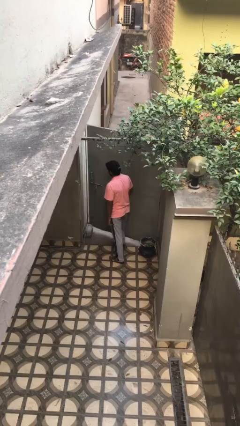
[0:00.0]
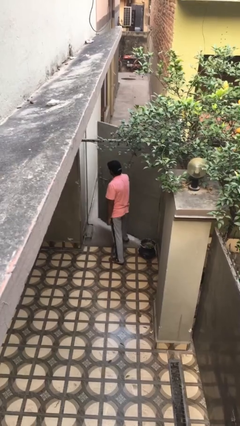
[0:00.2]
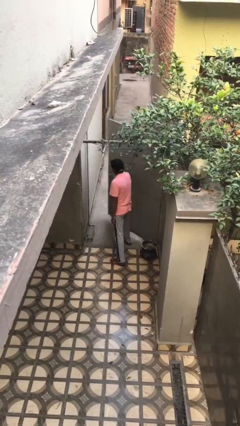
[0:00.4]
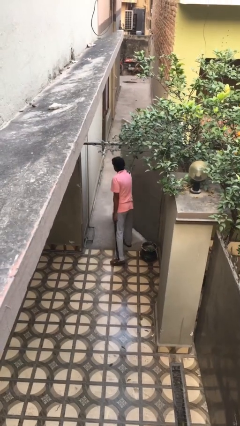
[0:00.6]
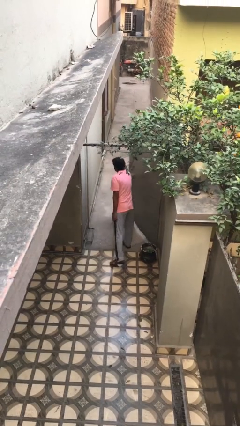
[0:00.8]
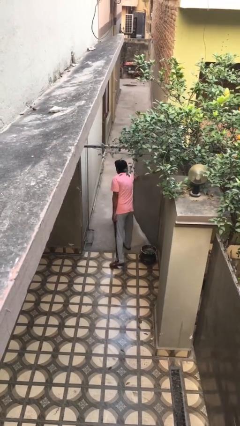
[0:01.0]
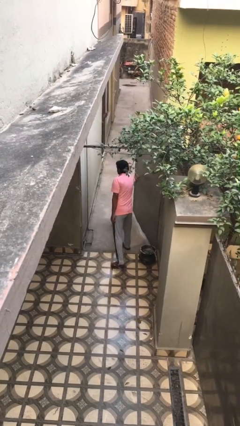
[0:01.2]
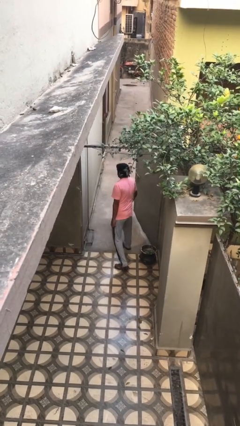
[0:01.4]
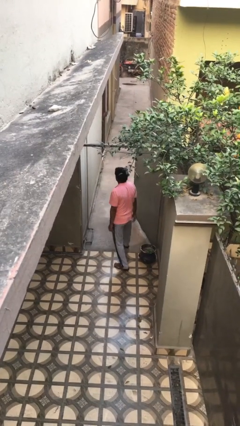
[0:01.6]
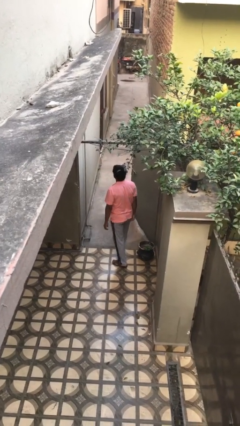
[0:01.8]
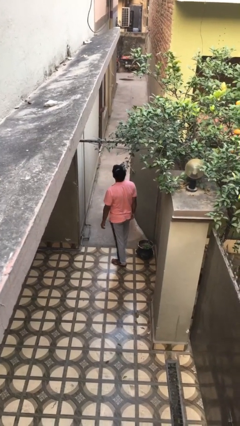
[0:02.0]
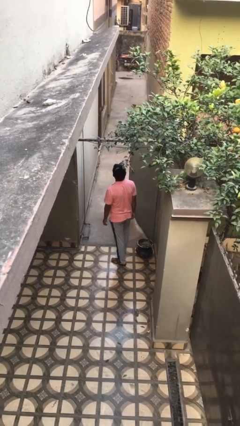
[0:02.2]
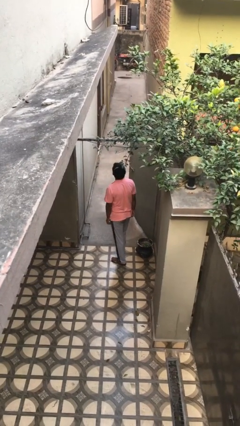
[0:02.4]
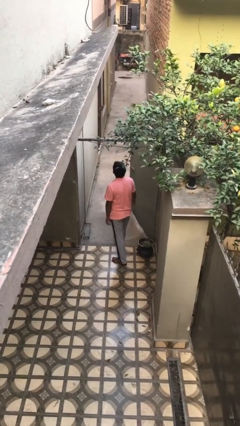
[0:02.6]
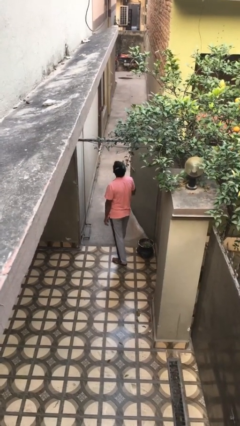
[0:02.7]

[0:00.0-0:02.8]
person opens facility door

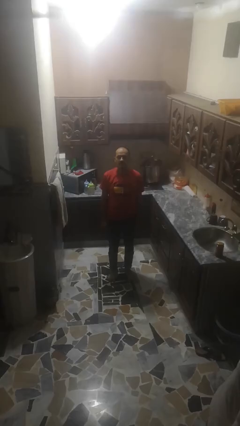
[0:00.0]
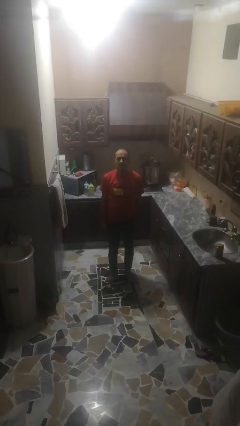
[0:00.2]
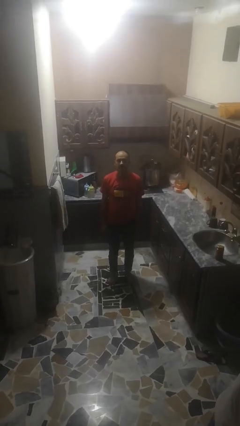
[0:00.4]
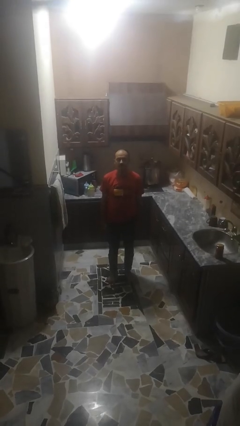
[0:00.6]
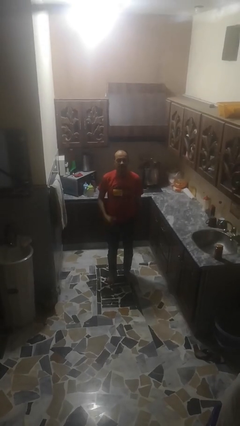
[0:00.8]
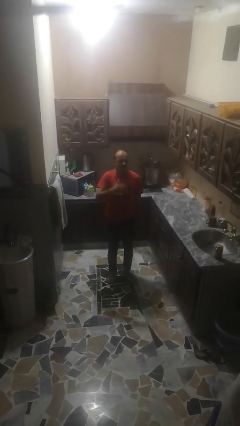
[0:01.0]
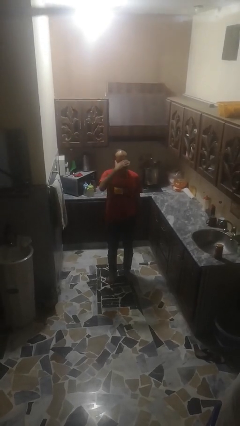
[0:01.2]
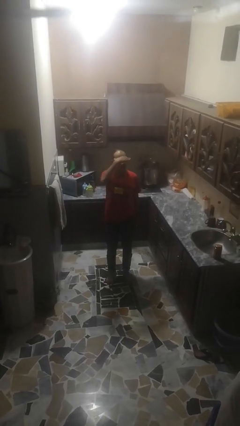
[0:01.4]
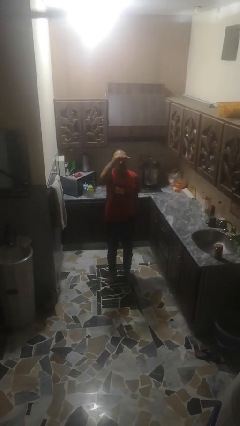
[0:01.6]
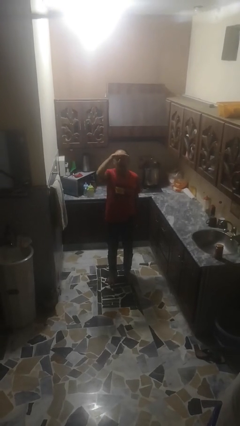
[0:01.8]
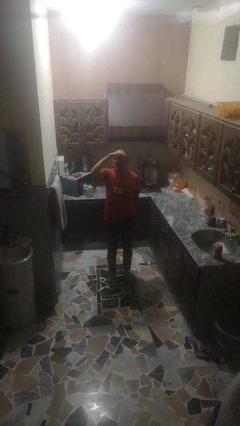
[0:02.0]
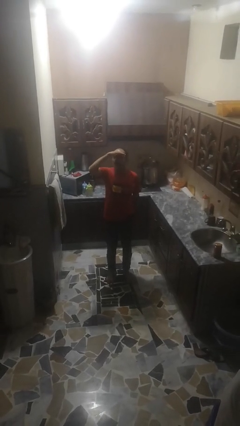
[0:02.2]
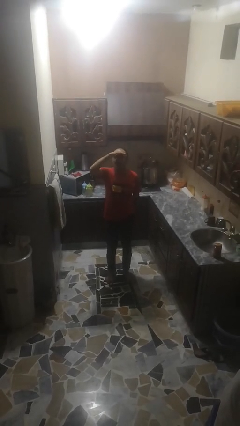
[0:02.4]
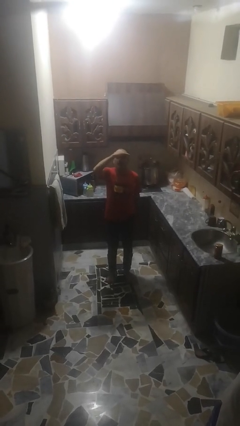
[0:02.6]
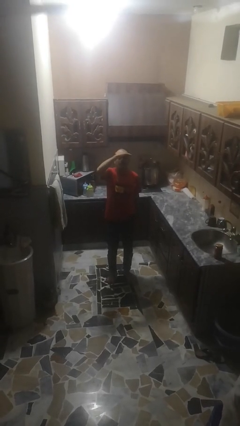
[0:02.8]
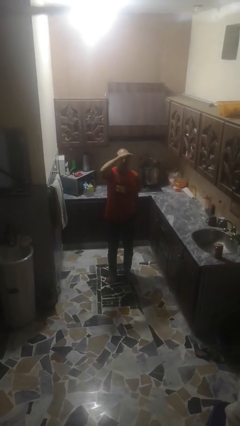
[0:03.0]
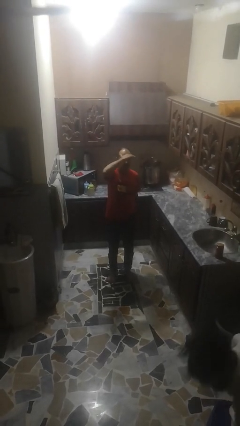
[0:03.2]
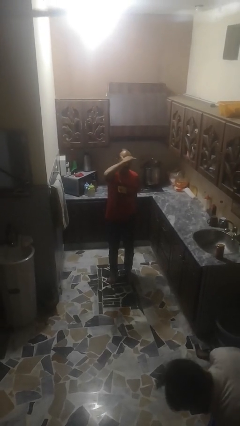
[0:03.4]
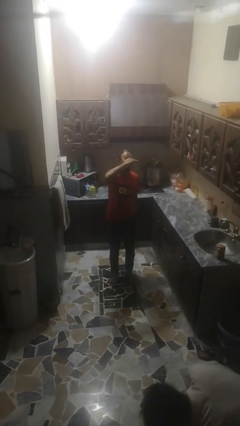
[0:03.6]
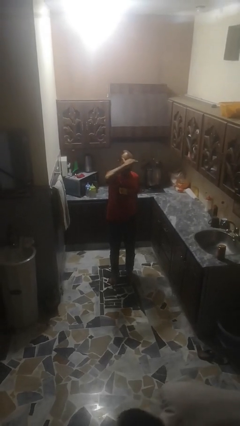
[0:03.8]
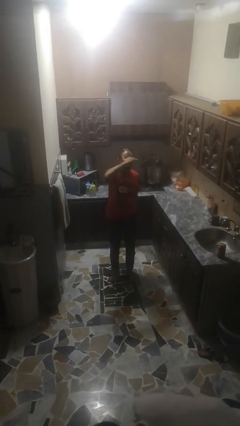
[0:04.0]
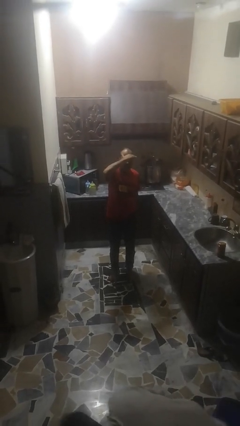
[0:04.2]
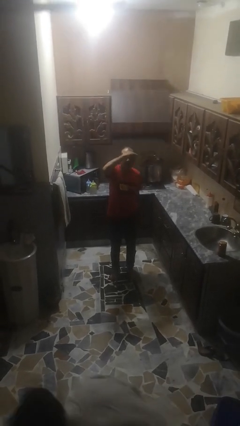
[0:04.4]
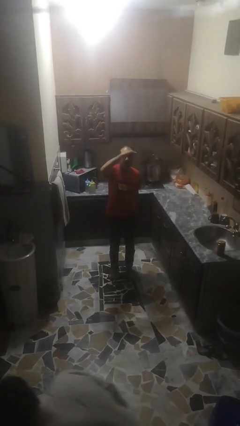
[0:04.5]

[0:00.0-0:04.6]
person shades eyes

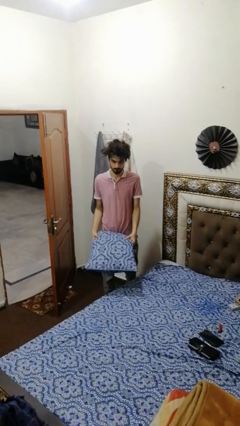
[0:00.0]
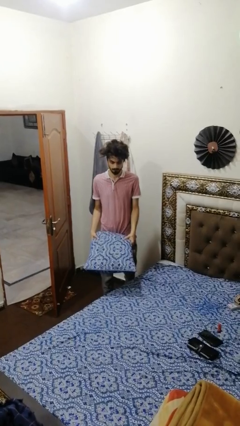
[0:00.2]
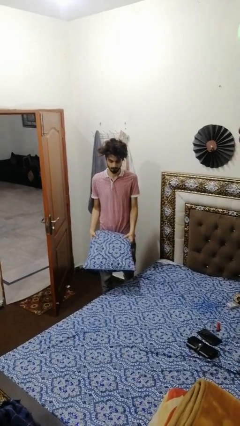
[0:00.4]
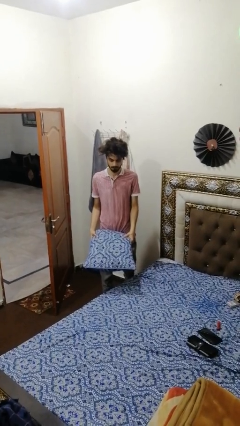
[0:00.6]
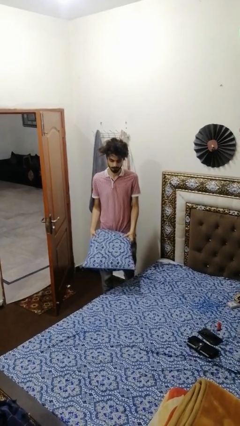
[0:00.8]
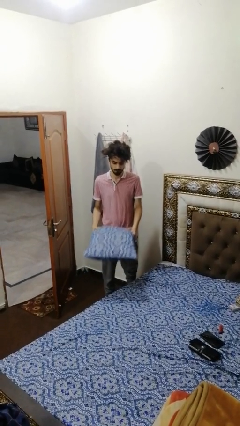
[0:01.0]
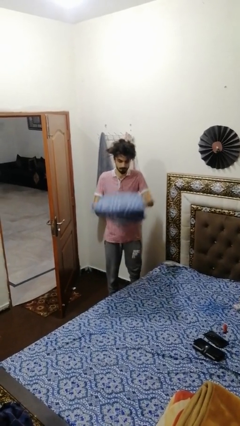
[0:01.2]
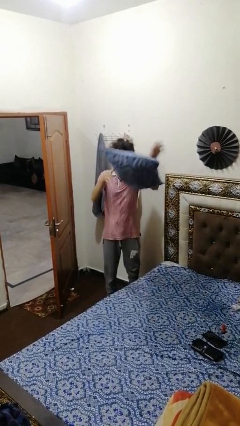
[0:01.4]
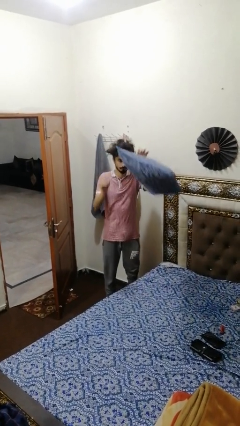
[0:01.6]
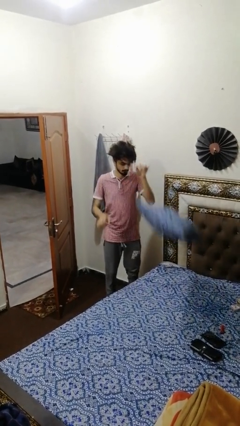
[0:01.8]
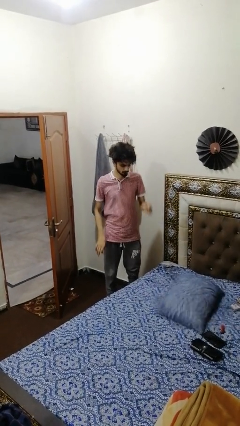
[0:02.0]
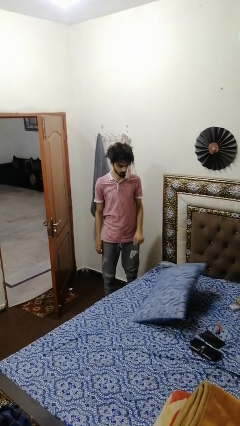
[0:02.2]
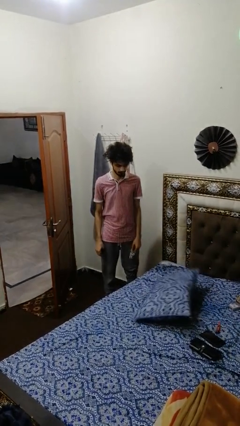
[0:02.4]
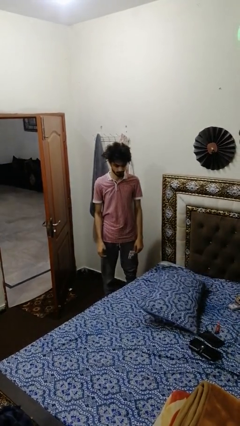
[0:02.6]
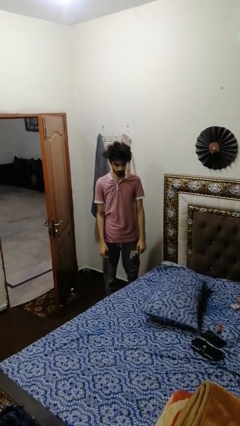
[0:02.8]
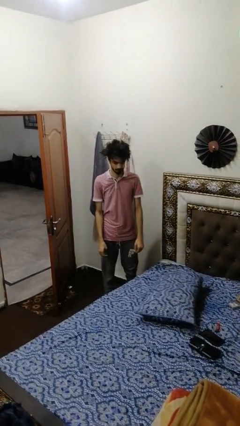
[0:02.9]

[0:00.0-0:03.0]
person throws object on bed

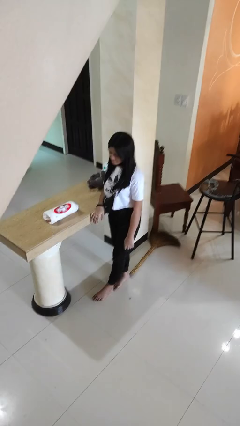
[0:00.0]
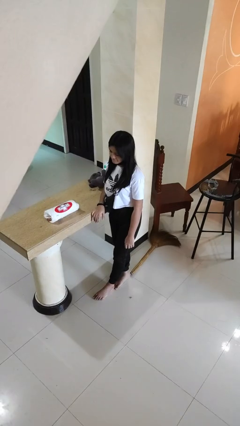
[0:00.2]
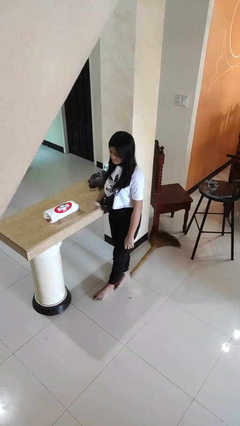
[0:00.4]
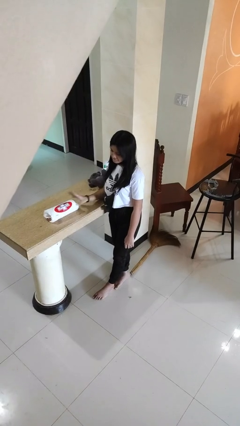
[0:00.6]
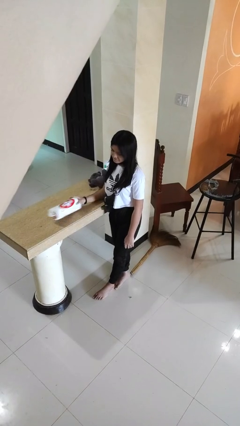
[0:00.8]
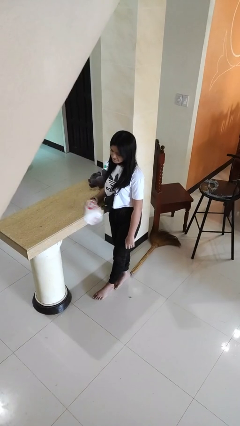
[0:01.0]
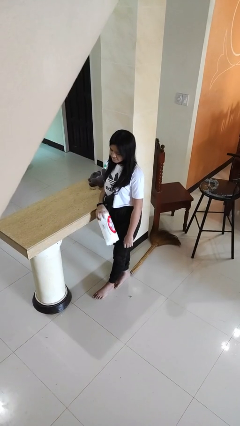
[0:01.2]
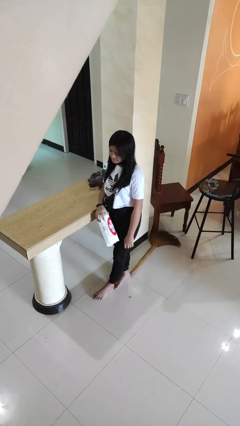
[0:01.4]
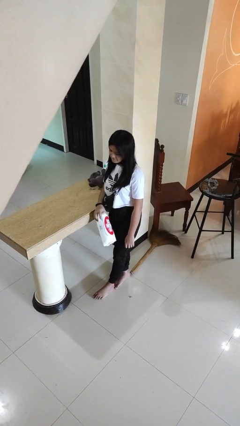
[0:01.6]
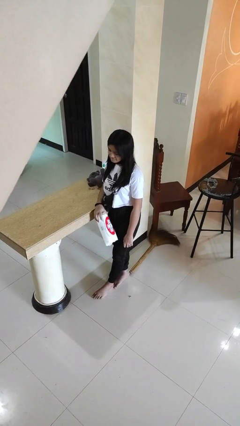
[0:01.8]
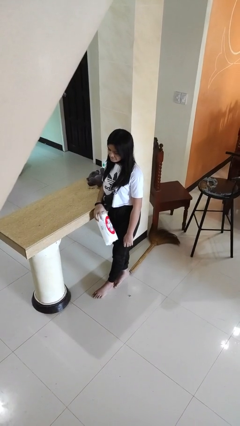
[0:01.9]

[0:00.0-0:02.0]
person picks up object from countertop

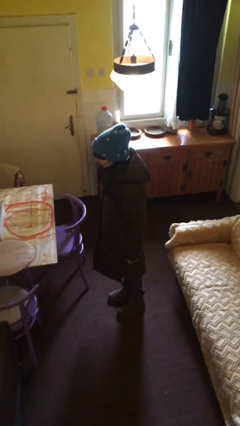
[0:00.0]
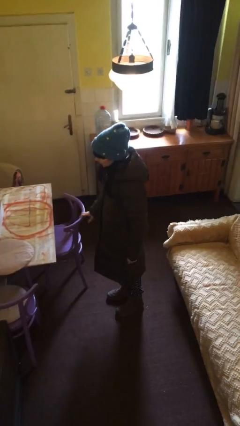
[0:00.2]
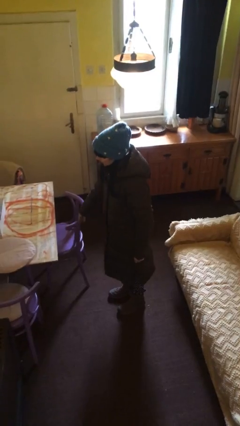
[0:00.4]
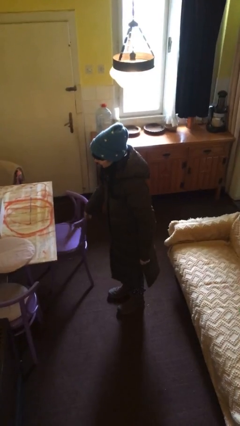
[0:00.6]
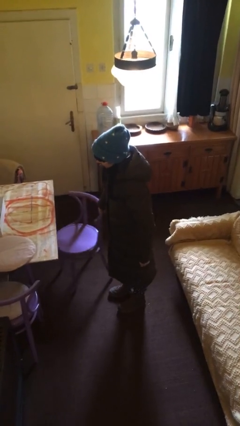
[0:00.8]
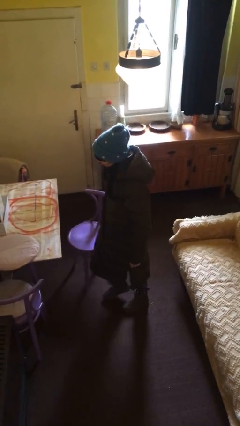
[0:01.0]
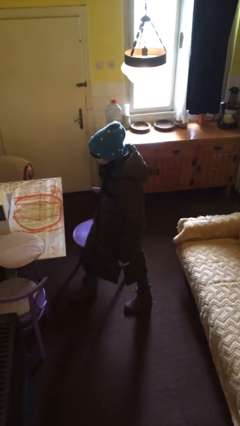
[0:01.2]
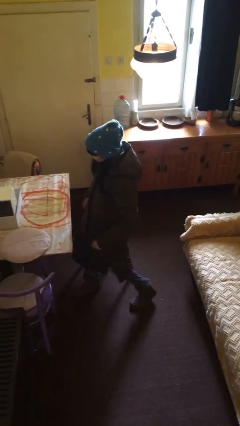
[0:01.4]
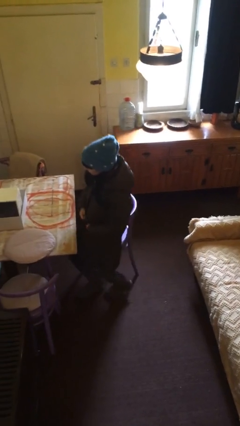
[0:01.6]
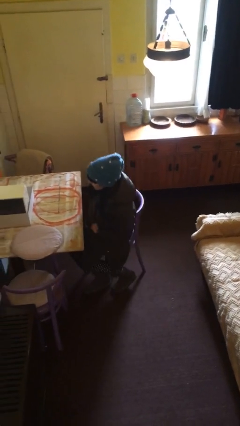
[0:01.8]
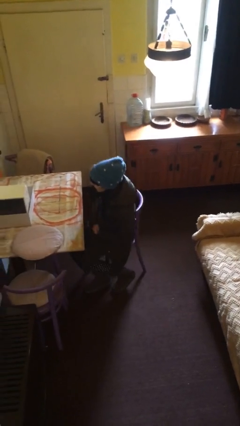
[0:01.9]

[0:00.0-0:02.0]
person sits down

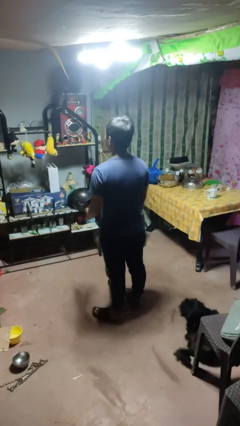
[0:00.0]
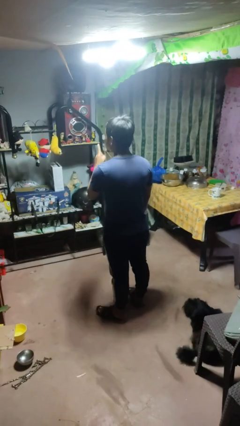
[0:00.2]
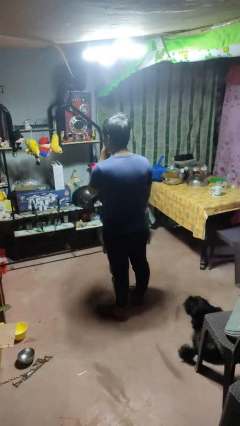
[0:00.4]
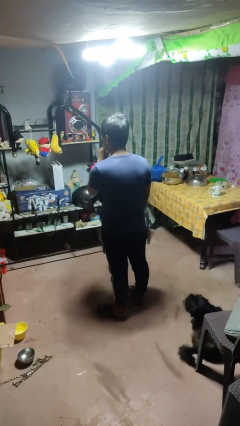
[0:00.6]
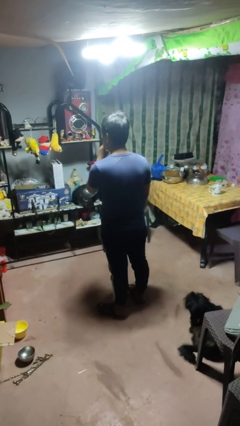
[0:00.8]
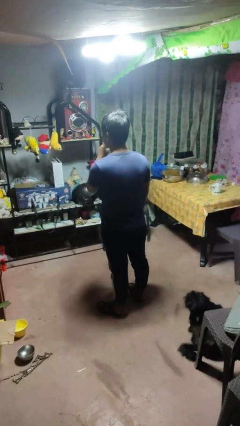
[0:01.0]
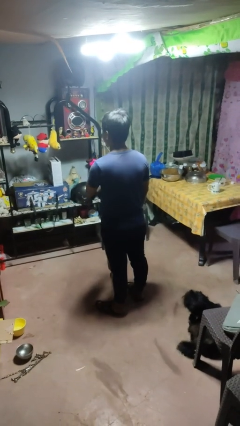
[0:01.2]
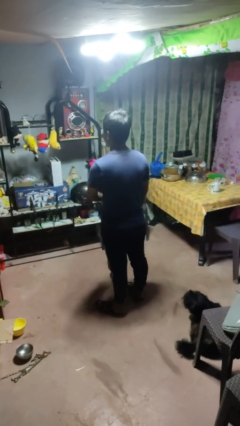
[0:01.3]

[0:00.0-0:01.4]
person gestures be quiet

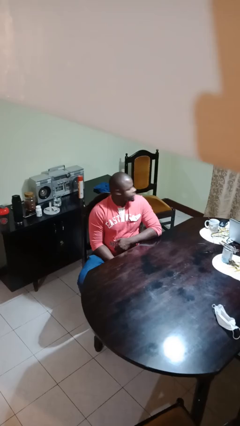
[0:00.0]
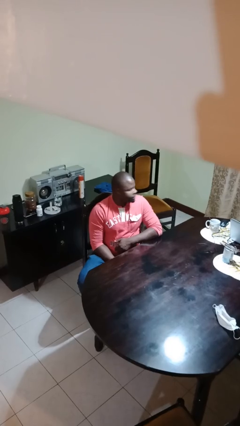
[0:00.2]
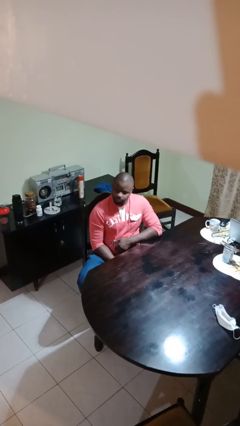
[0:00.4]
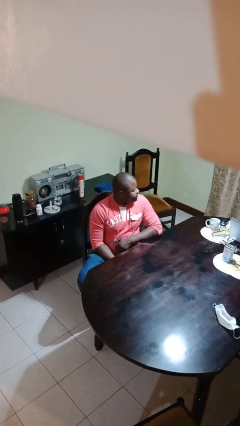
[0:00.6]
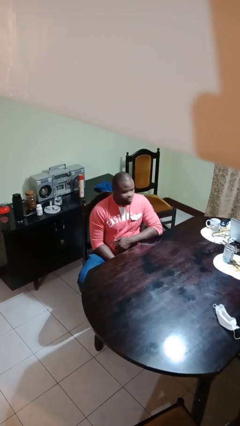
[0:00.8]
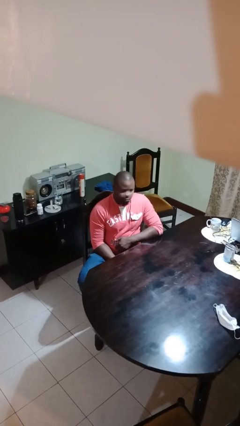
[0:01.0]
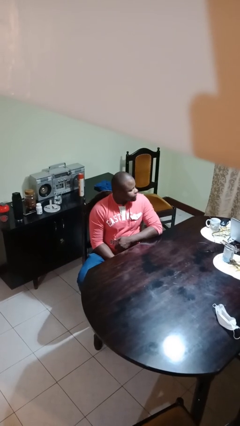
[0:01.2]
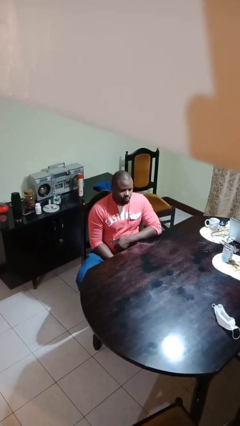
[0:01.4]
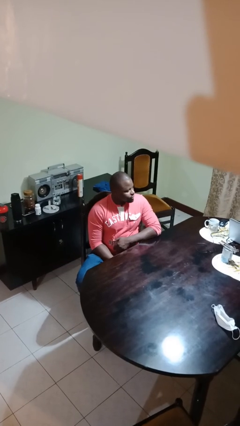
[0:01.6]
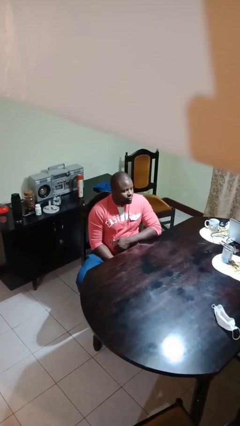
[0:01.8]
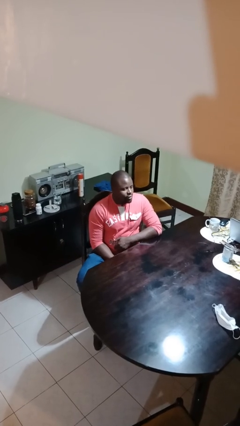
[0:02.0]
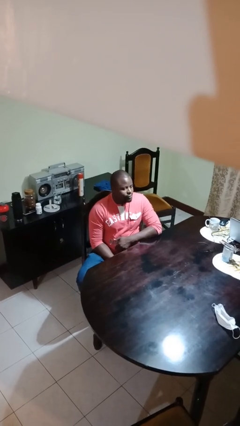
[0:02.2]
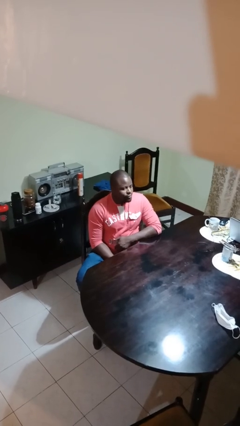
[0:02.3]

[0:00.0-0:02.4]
person shakes head
